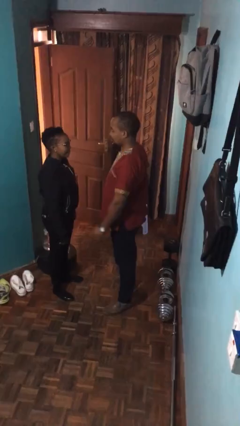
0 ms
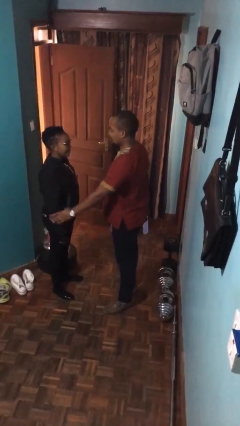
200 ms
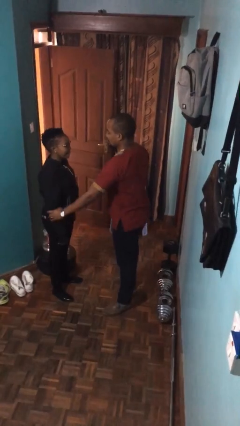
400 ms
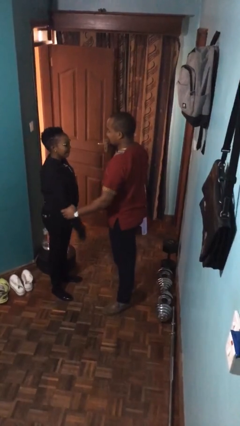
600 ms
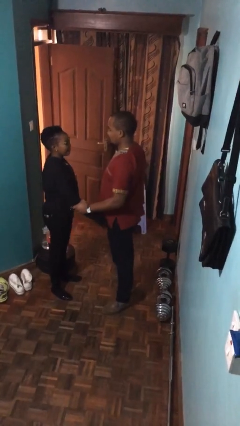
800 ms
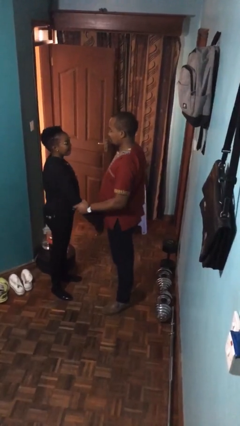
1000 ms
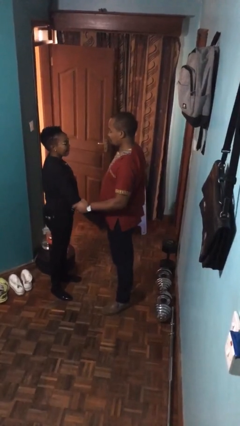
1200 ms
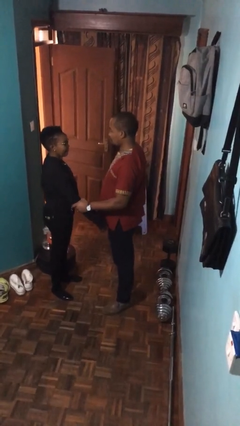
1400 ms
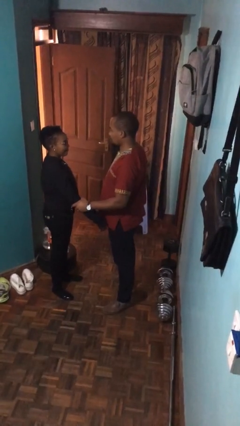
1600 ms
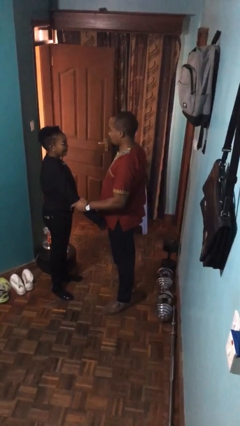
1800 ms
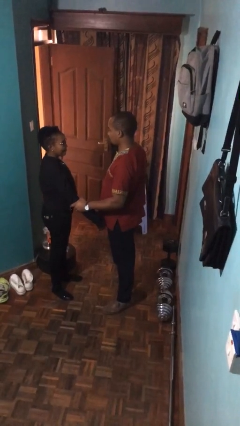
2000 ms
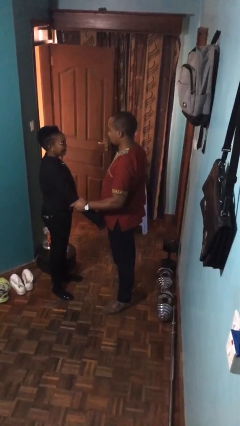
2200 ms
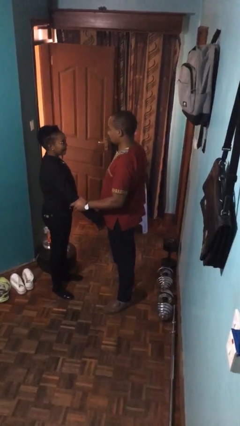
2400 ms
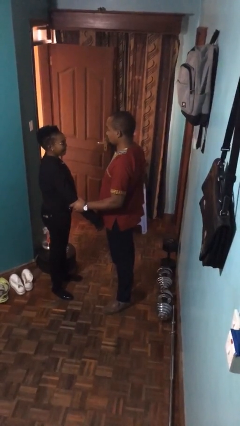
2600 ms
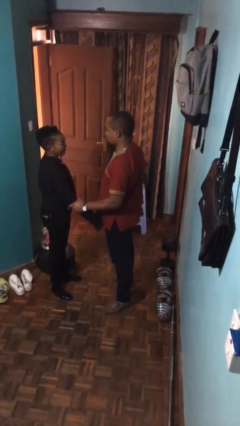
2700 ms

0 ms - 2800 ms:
person grabs person by forearm

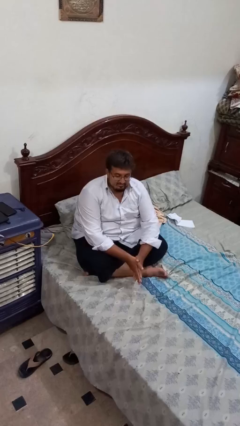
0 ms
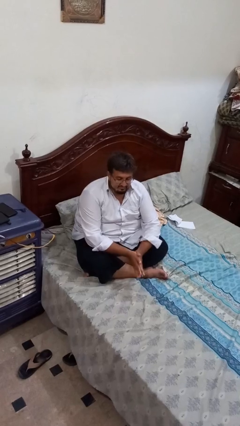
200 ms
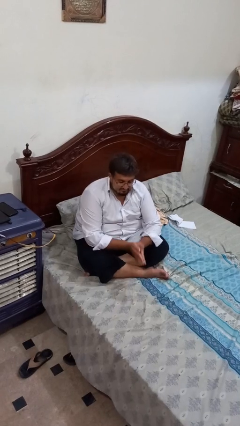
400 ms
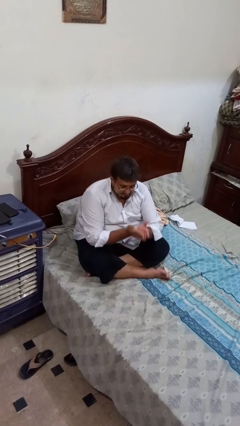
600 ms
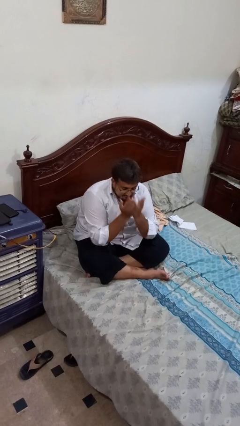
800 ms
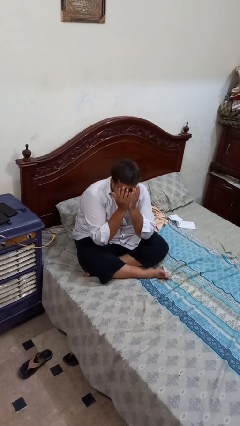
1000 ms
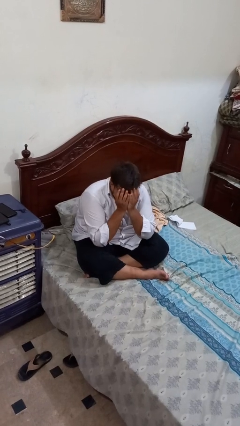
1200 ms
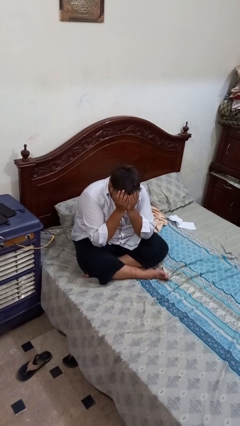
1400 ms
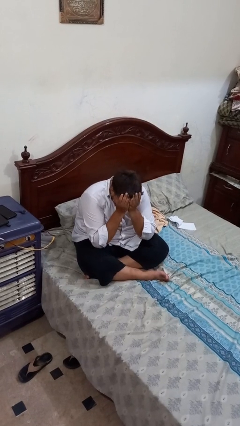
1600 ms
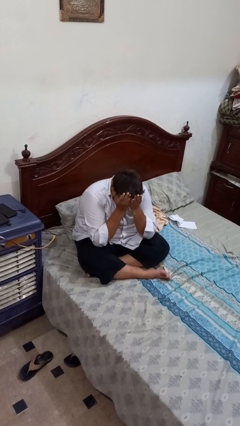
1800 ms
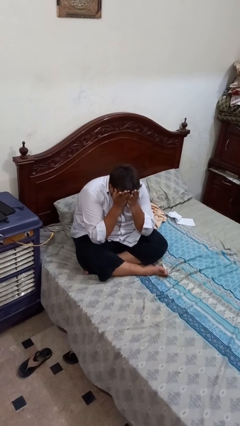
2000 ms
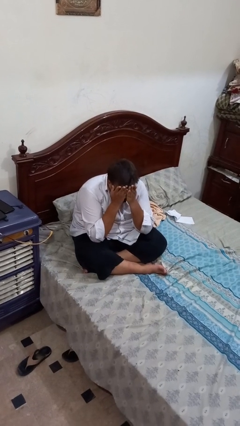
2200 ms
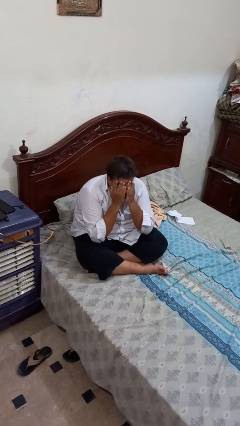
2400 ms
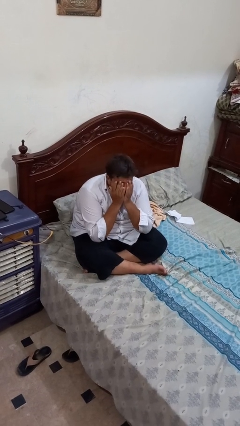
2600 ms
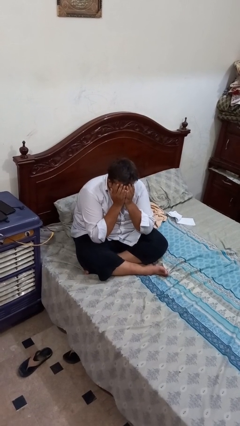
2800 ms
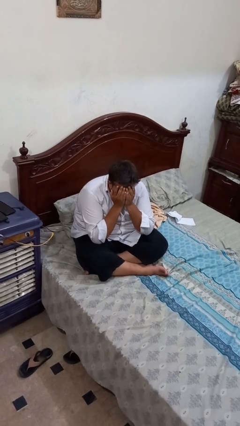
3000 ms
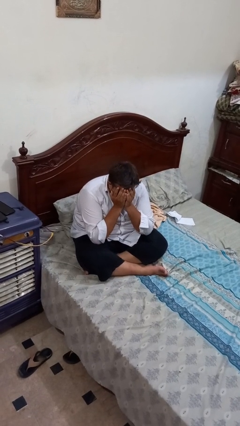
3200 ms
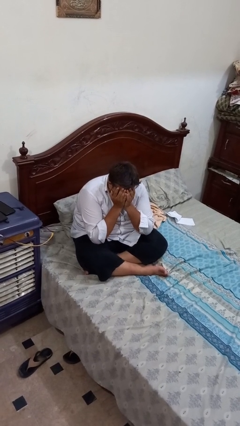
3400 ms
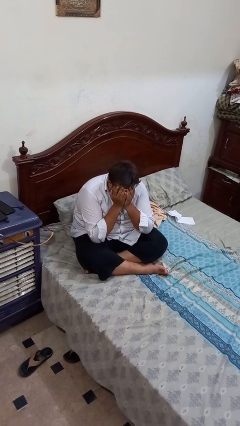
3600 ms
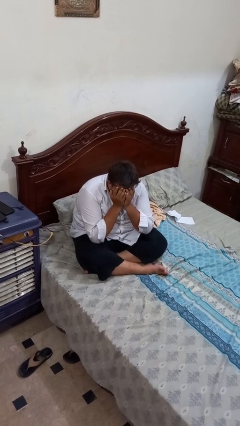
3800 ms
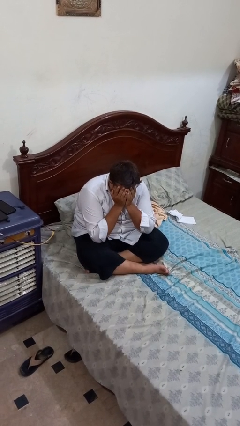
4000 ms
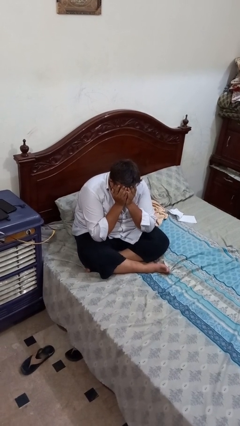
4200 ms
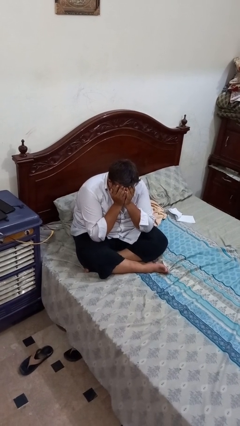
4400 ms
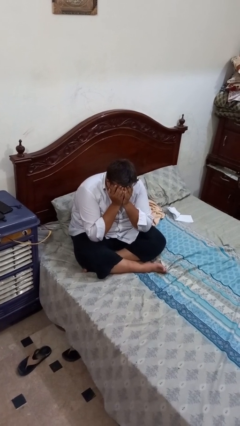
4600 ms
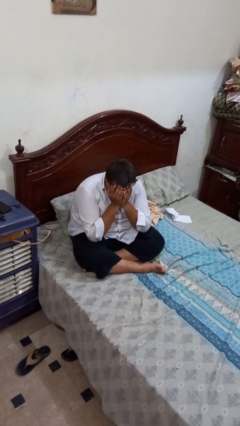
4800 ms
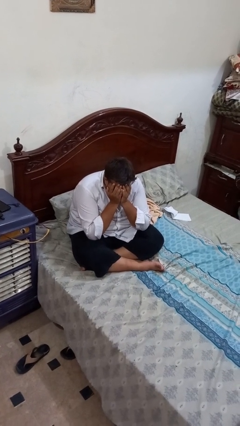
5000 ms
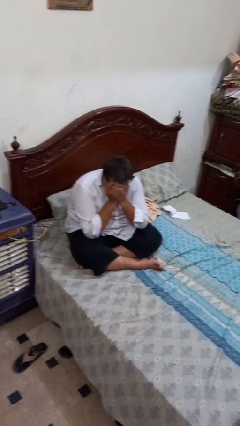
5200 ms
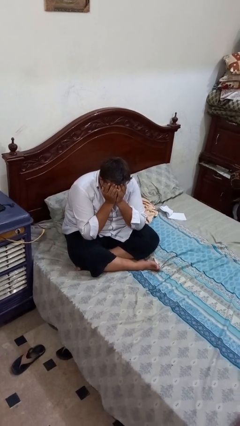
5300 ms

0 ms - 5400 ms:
person covers face with hands

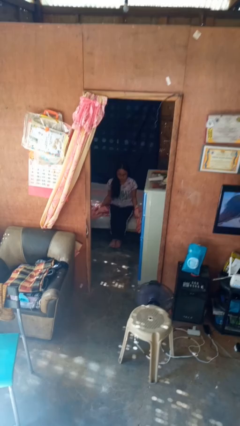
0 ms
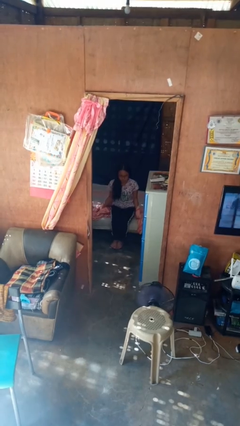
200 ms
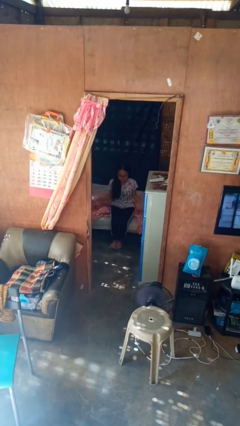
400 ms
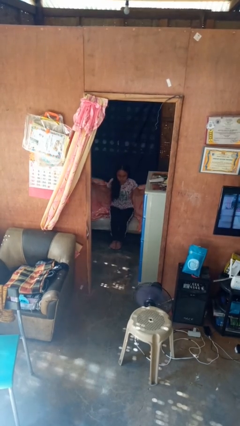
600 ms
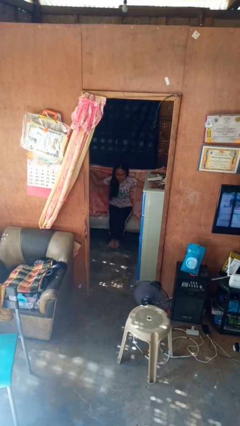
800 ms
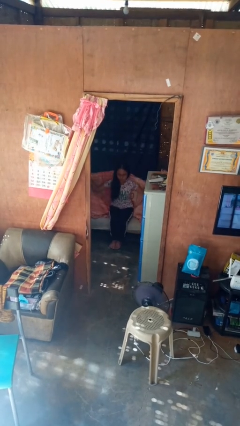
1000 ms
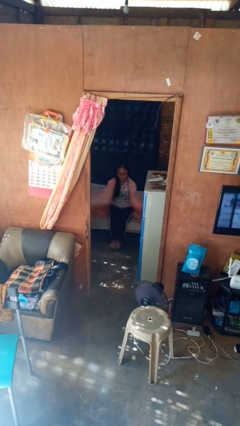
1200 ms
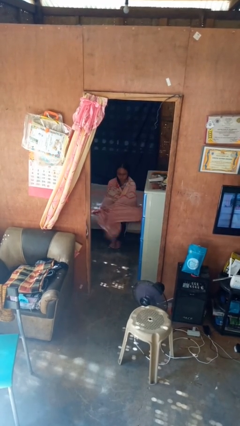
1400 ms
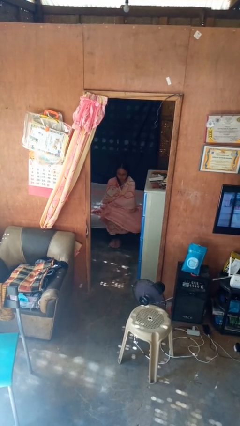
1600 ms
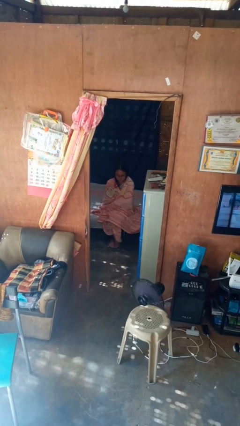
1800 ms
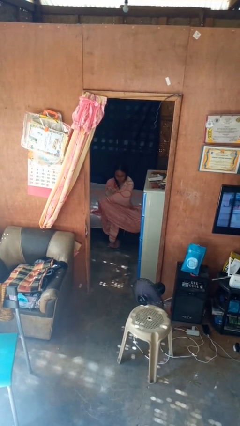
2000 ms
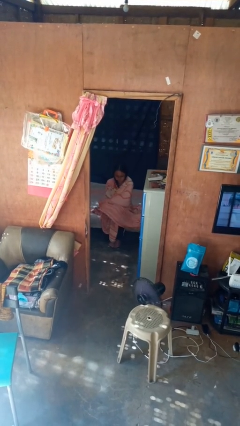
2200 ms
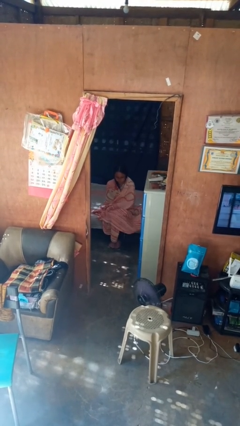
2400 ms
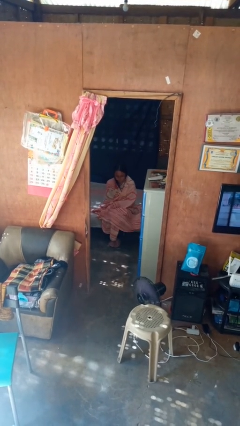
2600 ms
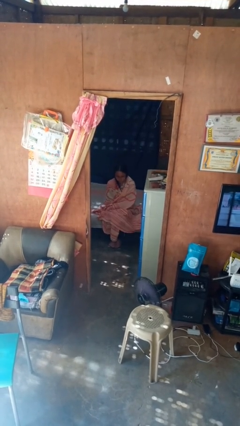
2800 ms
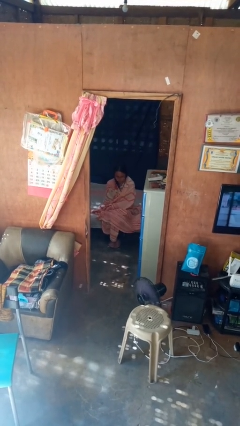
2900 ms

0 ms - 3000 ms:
person covers with blanket

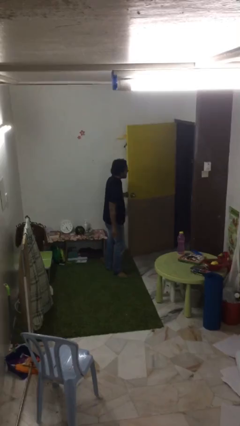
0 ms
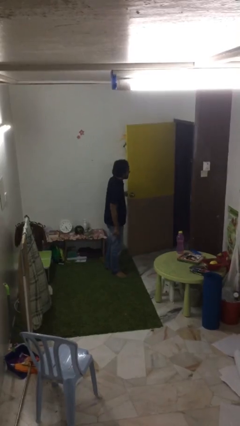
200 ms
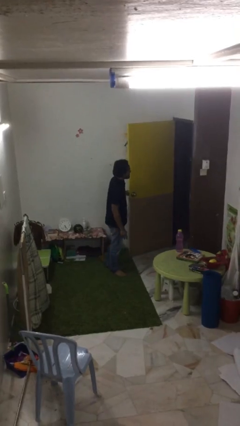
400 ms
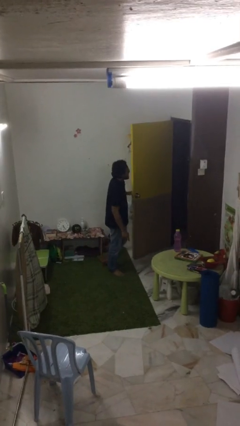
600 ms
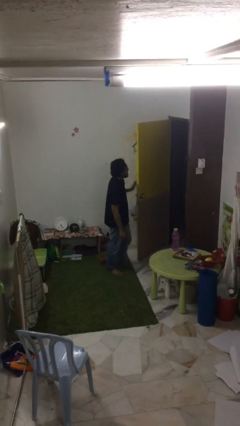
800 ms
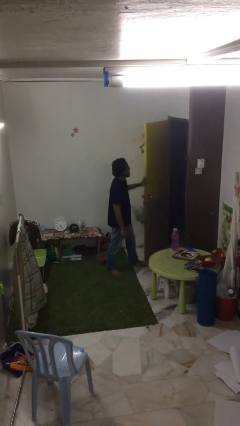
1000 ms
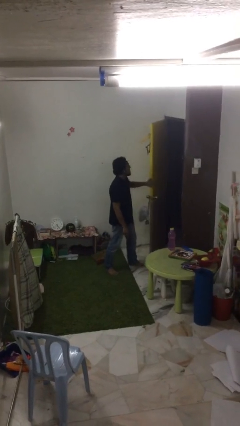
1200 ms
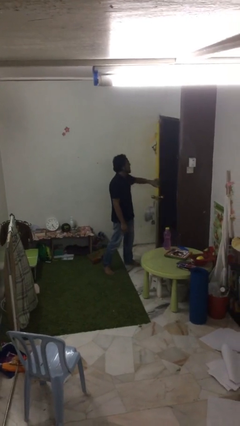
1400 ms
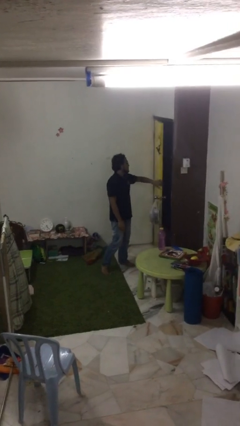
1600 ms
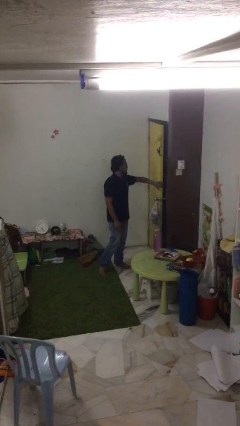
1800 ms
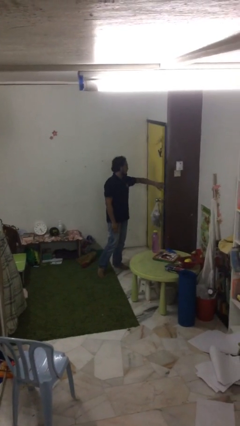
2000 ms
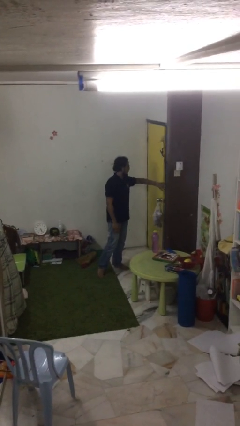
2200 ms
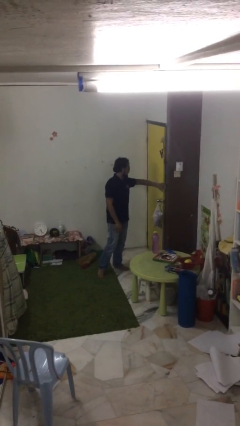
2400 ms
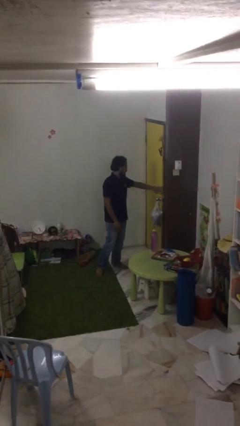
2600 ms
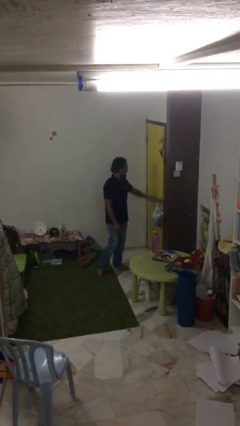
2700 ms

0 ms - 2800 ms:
person closes facility door

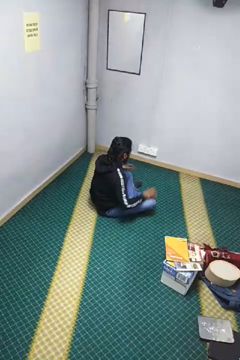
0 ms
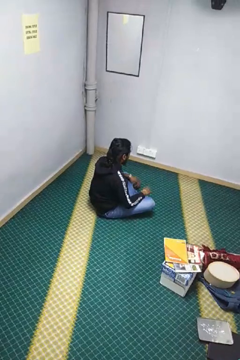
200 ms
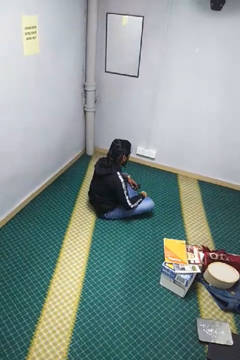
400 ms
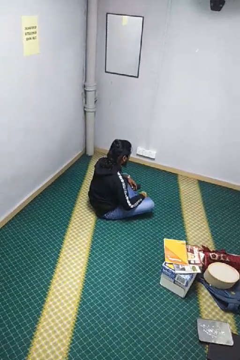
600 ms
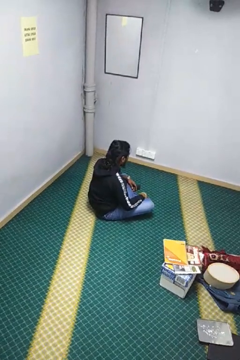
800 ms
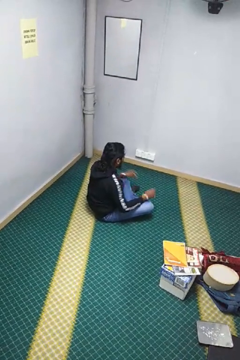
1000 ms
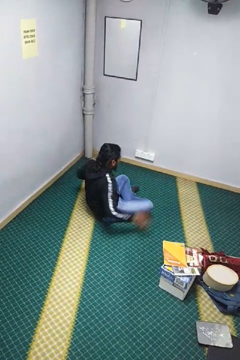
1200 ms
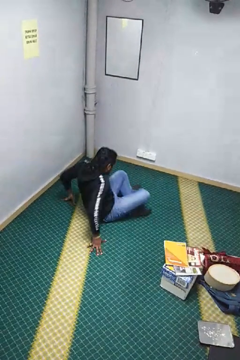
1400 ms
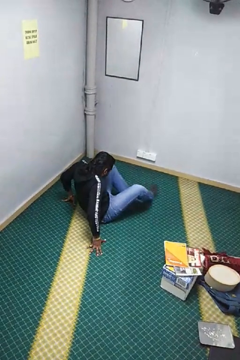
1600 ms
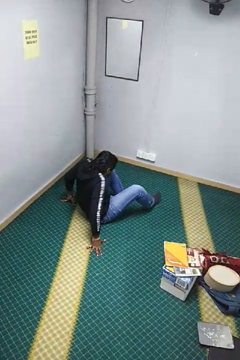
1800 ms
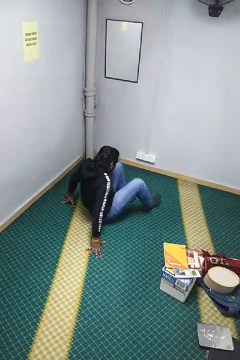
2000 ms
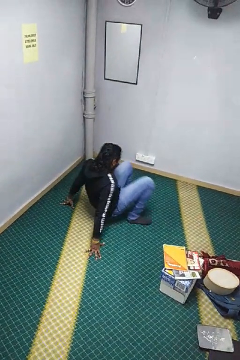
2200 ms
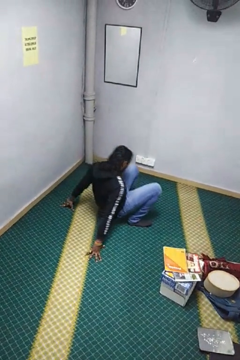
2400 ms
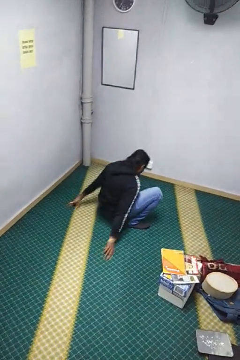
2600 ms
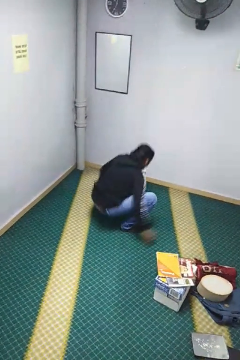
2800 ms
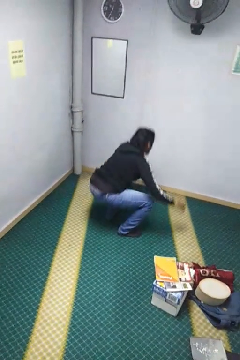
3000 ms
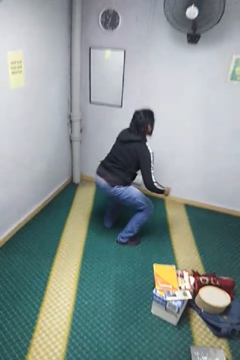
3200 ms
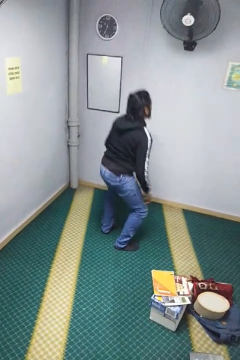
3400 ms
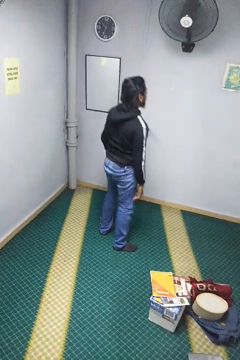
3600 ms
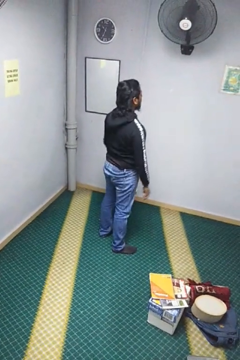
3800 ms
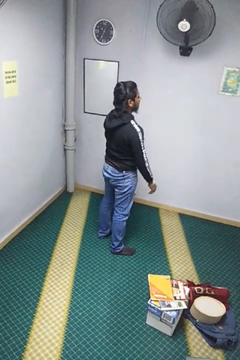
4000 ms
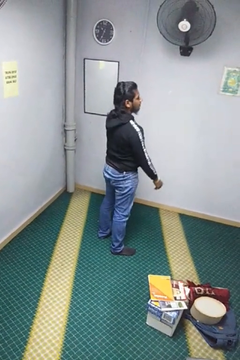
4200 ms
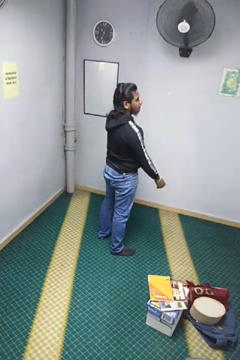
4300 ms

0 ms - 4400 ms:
person stands up from floor
